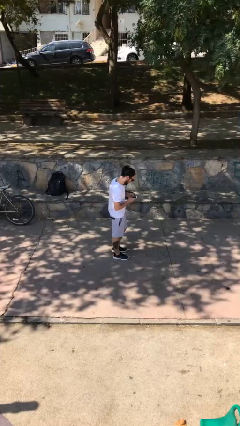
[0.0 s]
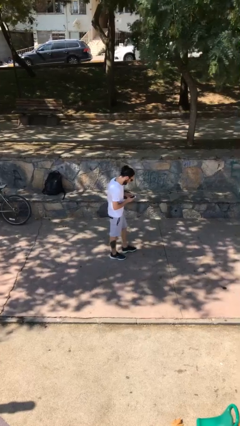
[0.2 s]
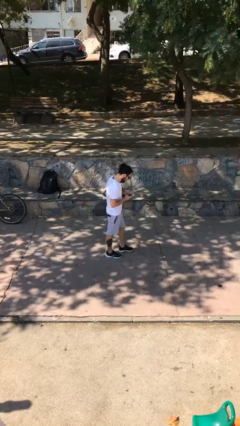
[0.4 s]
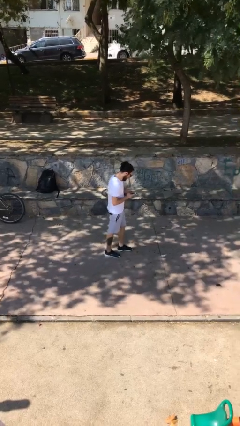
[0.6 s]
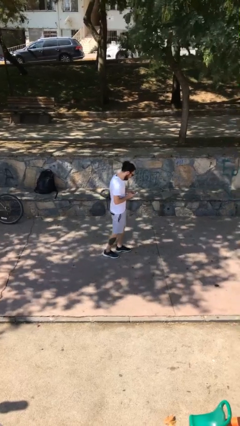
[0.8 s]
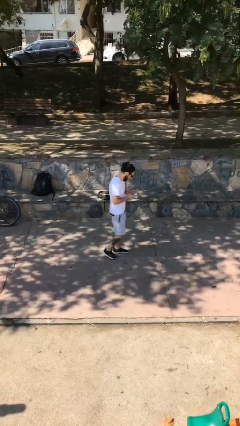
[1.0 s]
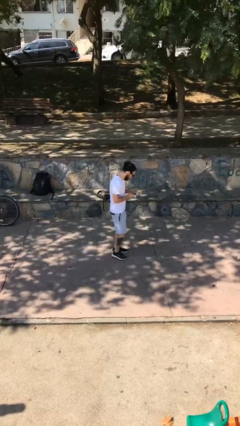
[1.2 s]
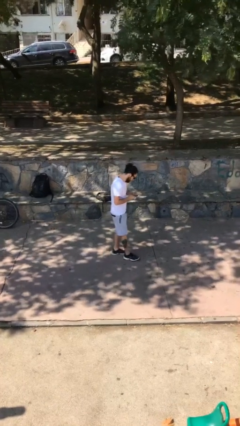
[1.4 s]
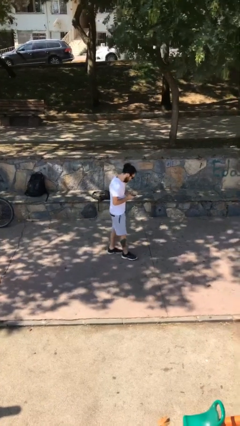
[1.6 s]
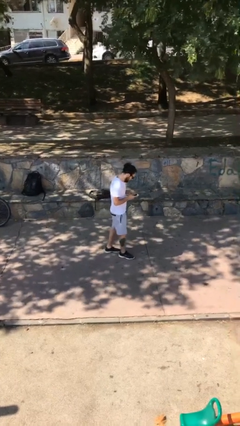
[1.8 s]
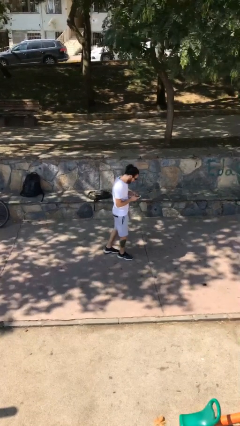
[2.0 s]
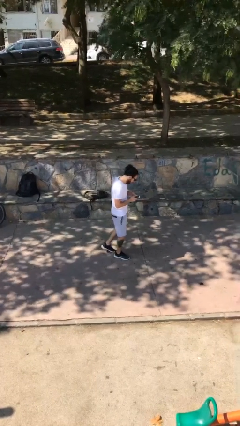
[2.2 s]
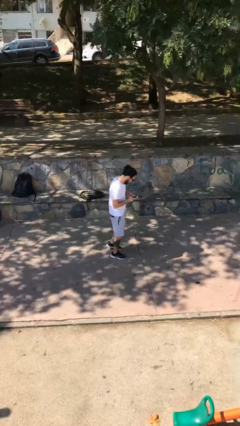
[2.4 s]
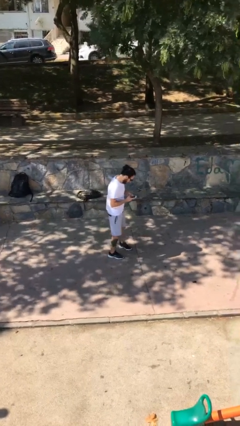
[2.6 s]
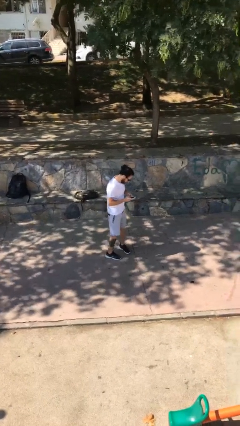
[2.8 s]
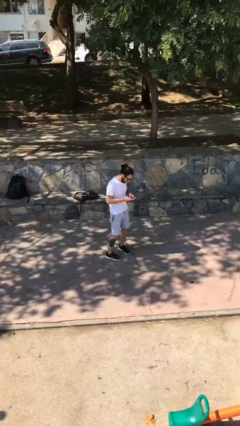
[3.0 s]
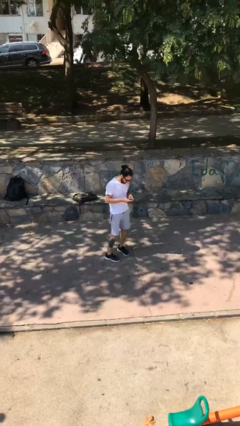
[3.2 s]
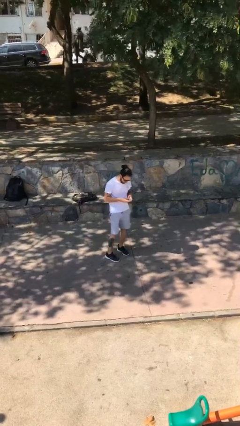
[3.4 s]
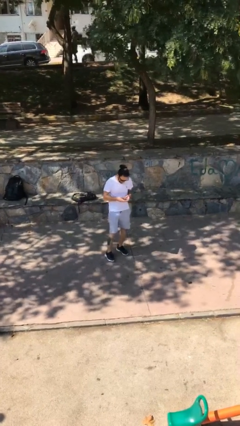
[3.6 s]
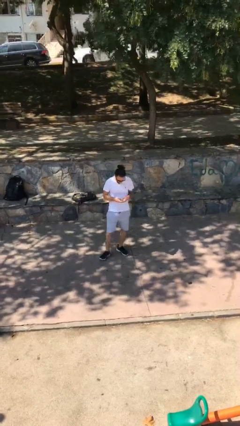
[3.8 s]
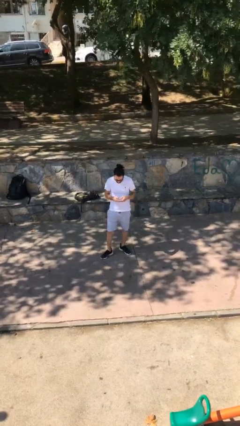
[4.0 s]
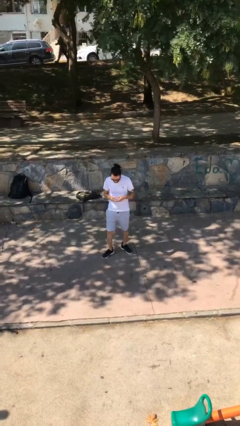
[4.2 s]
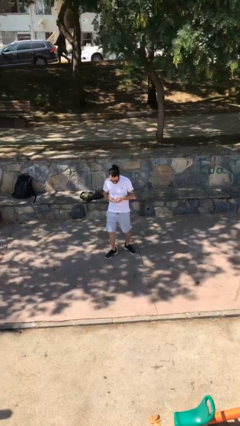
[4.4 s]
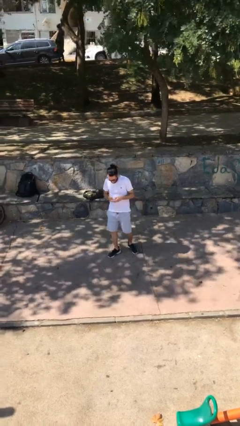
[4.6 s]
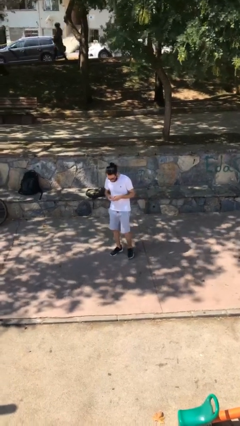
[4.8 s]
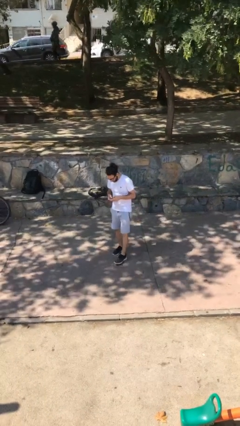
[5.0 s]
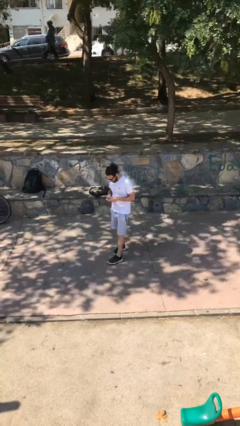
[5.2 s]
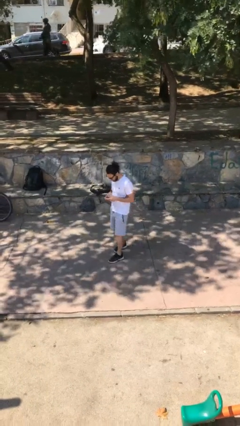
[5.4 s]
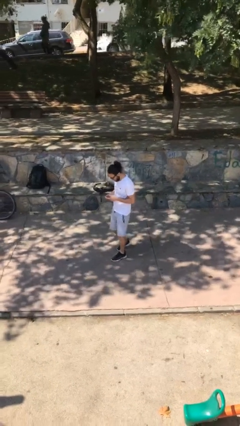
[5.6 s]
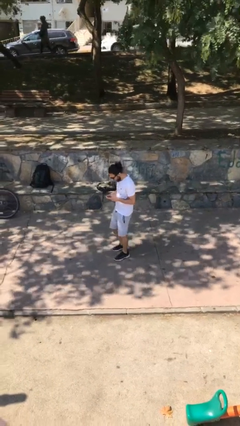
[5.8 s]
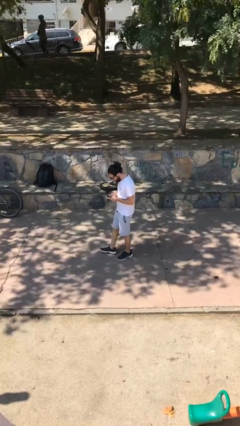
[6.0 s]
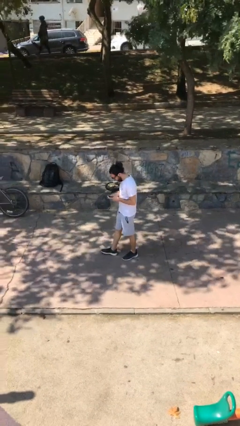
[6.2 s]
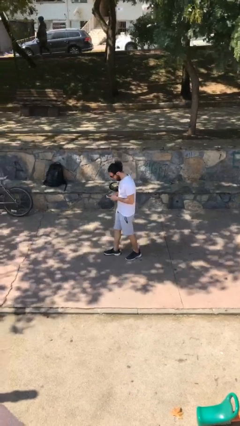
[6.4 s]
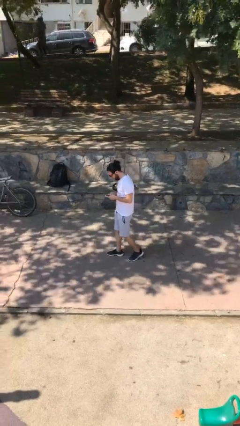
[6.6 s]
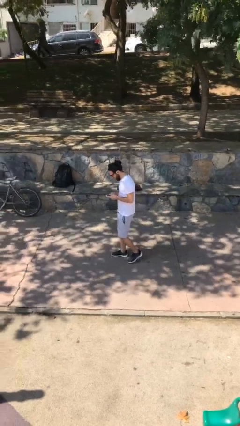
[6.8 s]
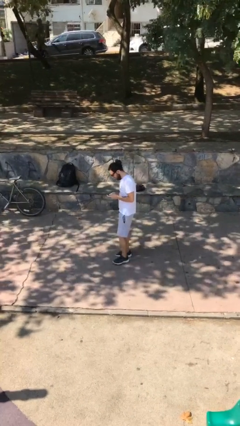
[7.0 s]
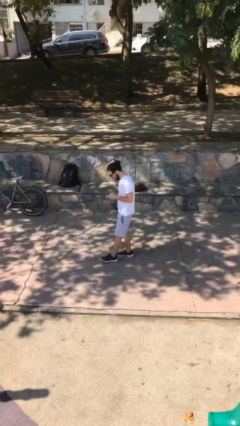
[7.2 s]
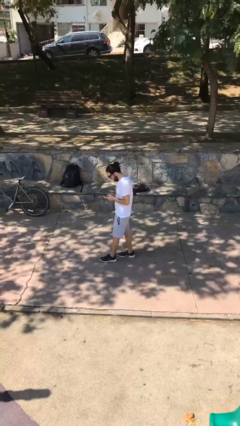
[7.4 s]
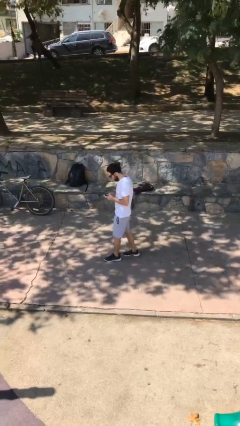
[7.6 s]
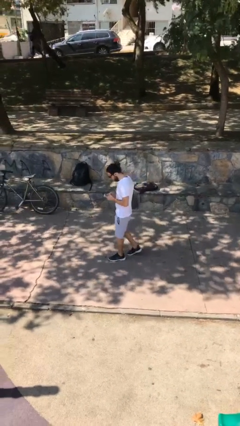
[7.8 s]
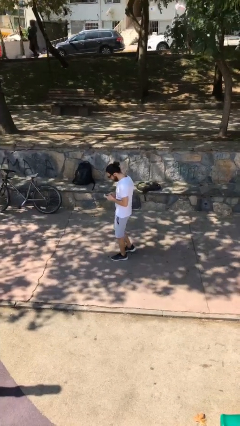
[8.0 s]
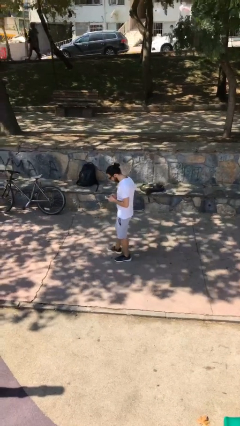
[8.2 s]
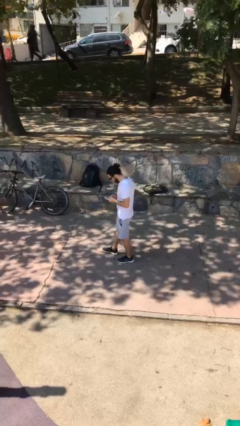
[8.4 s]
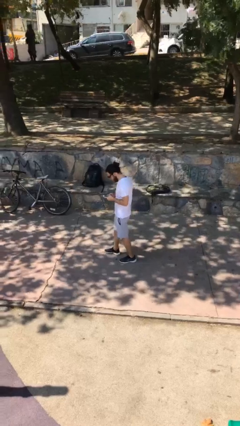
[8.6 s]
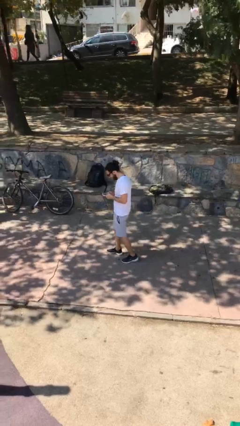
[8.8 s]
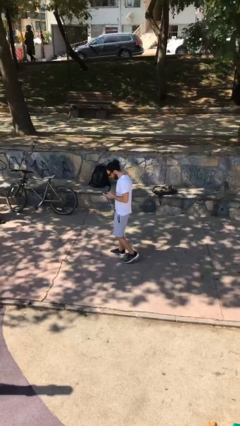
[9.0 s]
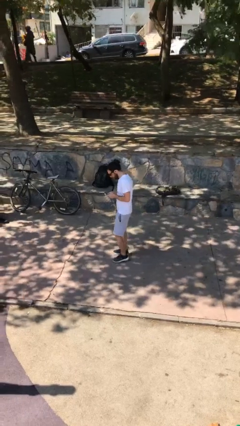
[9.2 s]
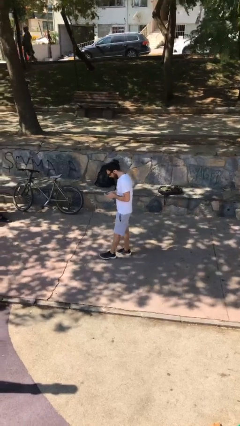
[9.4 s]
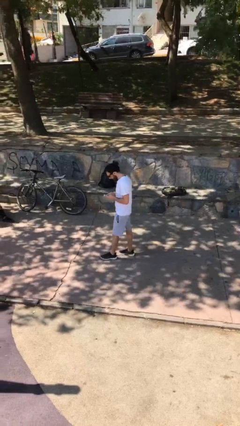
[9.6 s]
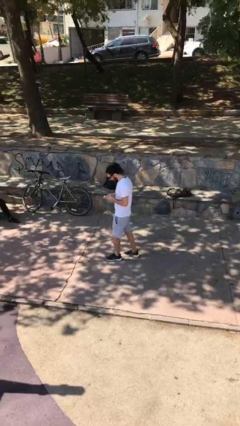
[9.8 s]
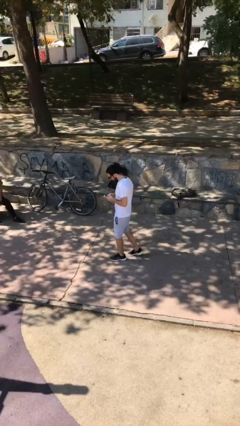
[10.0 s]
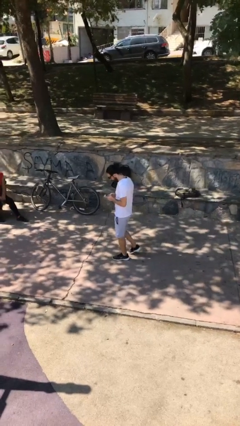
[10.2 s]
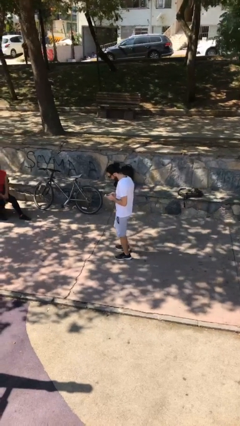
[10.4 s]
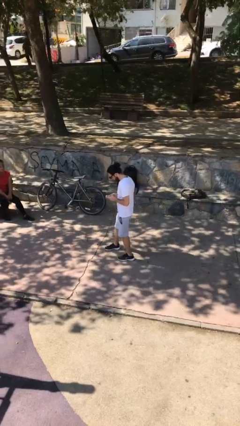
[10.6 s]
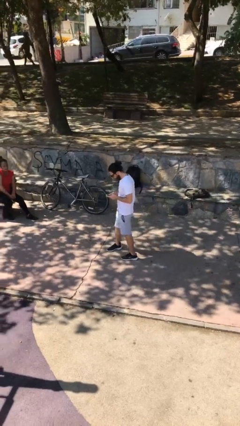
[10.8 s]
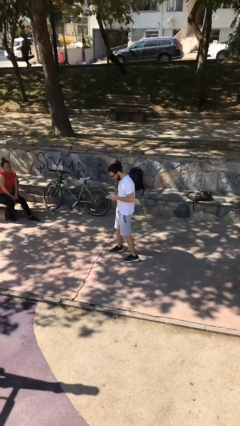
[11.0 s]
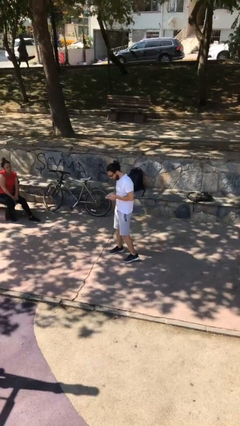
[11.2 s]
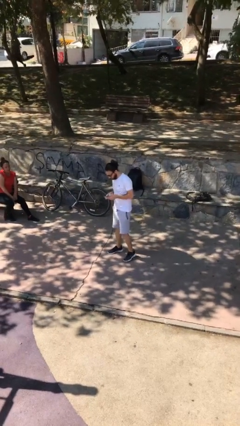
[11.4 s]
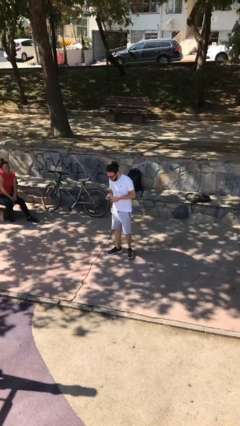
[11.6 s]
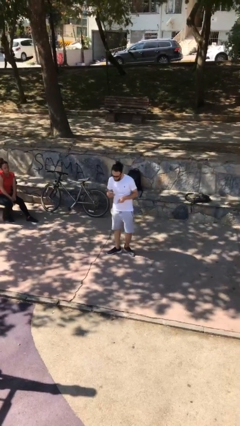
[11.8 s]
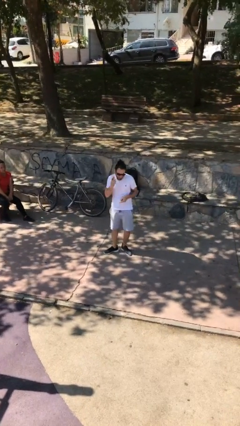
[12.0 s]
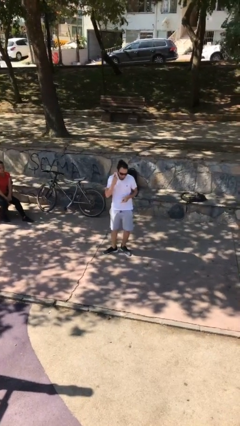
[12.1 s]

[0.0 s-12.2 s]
person texts on phone

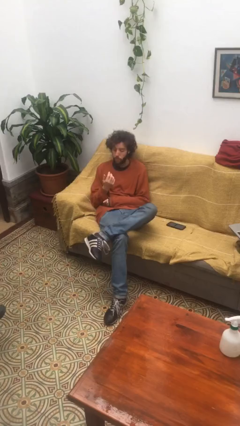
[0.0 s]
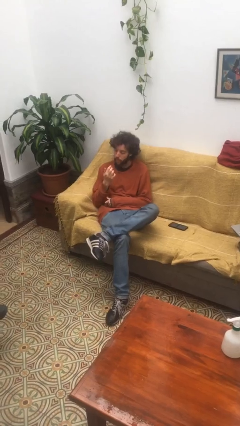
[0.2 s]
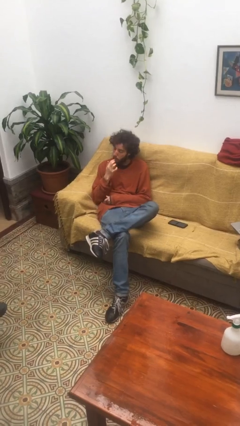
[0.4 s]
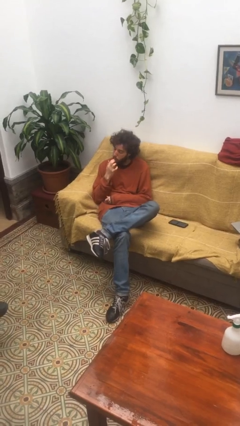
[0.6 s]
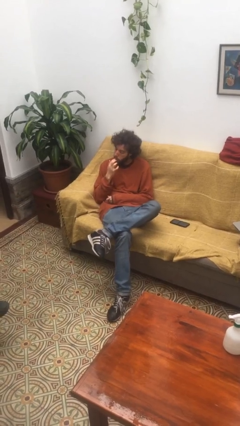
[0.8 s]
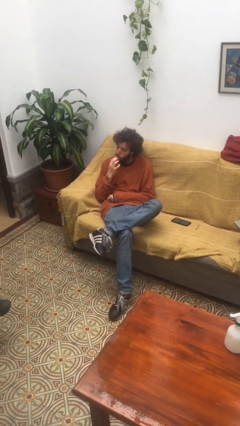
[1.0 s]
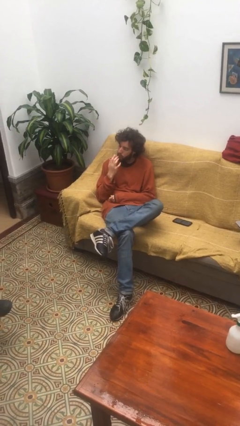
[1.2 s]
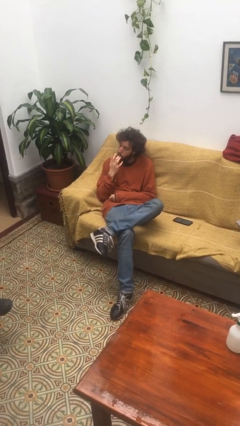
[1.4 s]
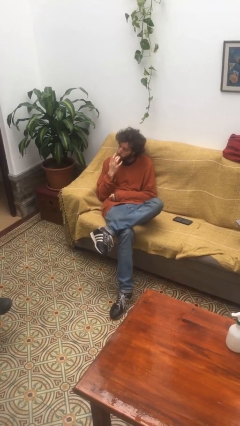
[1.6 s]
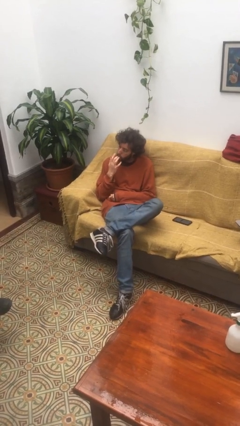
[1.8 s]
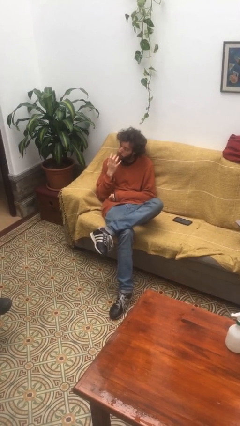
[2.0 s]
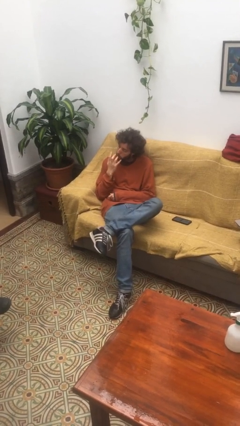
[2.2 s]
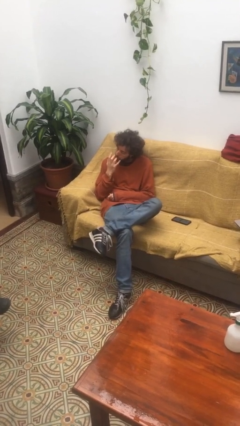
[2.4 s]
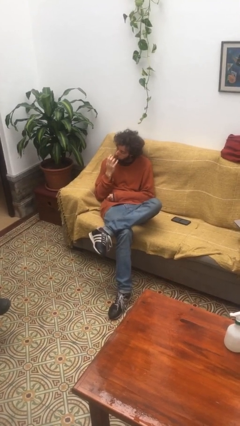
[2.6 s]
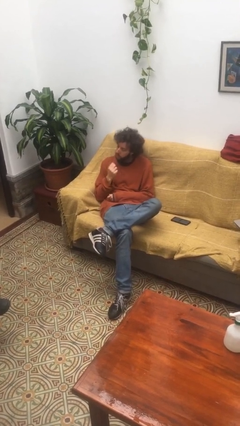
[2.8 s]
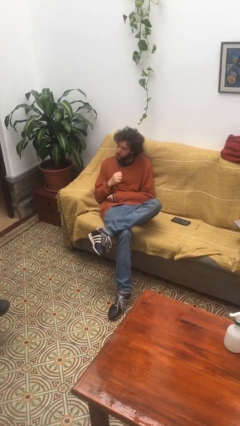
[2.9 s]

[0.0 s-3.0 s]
person licks fingers

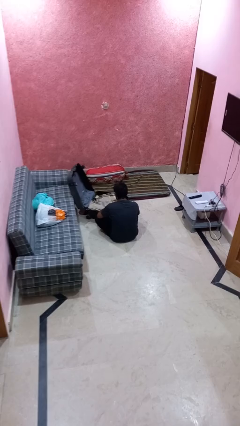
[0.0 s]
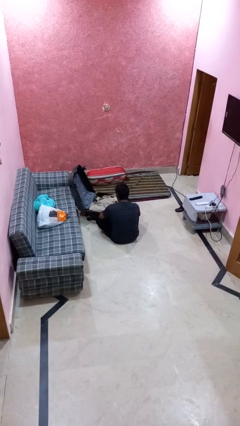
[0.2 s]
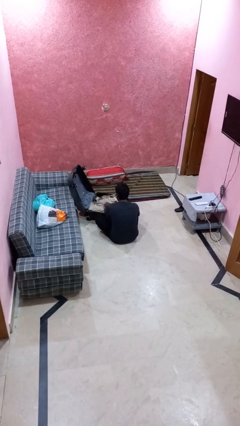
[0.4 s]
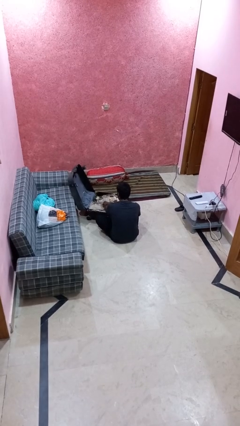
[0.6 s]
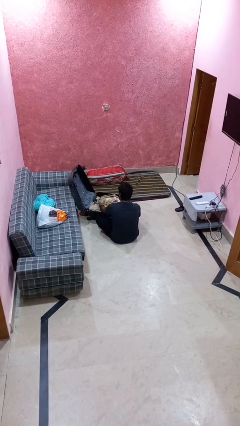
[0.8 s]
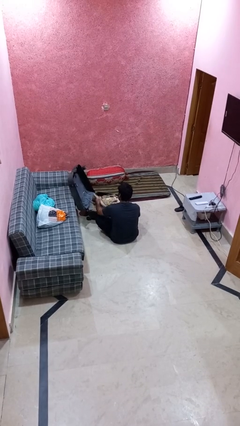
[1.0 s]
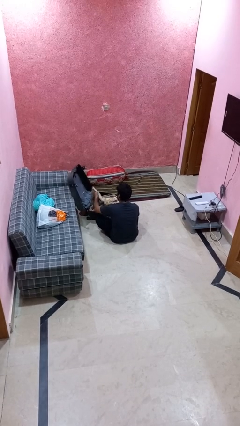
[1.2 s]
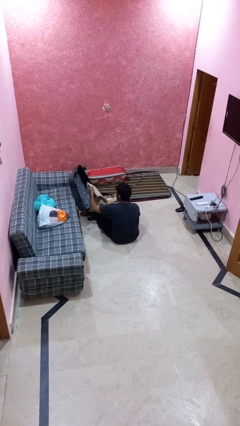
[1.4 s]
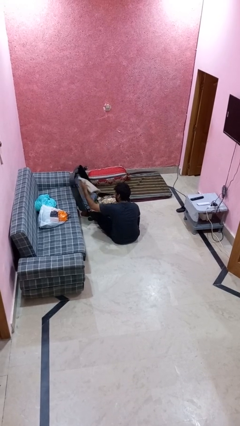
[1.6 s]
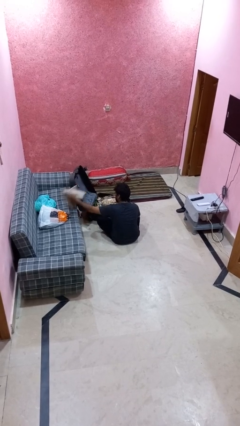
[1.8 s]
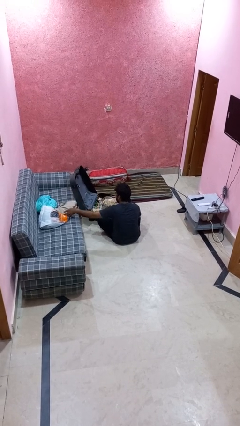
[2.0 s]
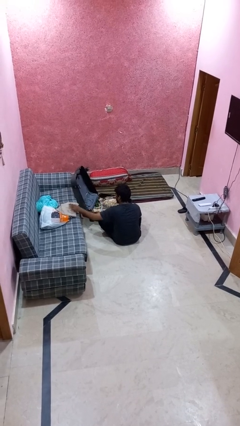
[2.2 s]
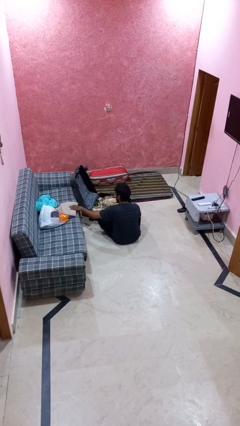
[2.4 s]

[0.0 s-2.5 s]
person unloads clothes from suitcase

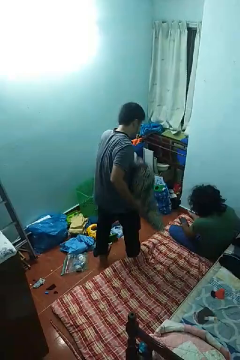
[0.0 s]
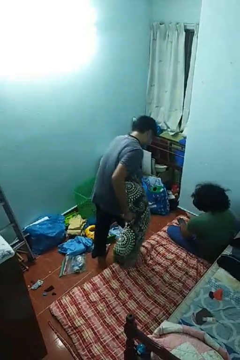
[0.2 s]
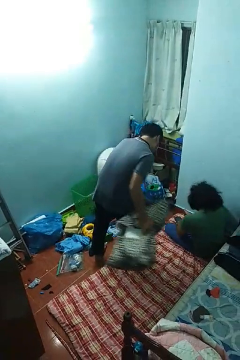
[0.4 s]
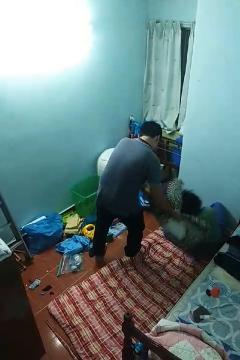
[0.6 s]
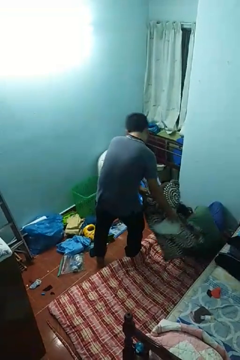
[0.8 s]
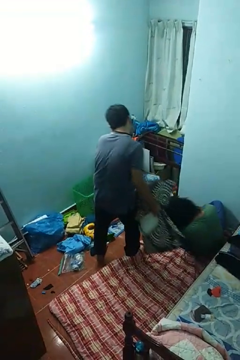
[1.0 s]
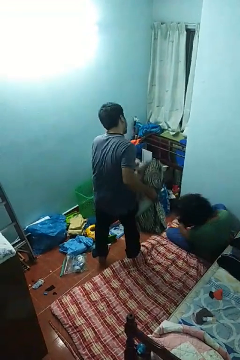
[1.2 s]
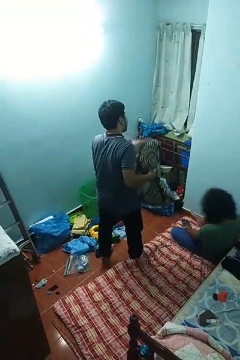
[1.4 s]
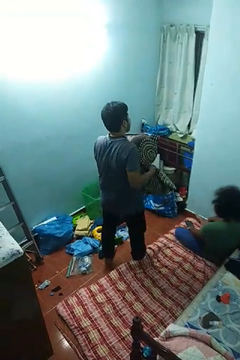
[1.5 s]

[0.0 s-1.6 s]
person hits person with pillow
